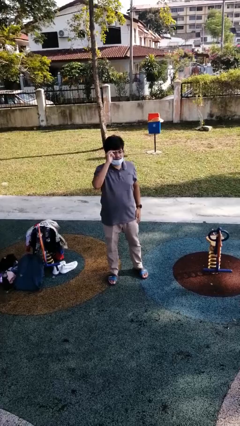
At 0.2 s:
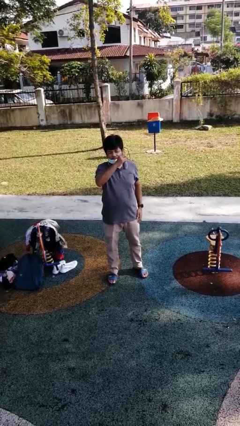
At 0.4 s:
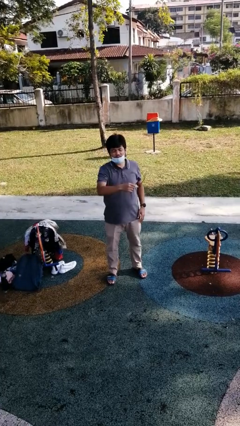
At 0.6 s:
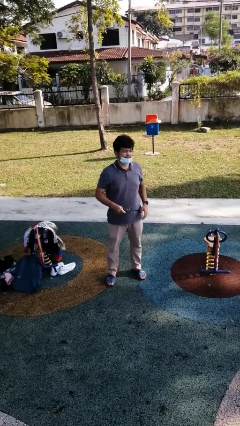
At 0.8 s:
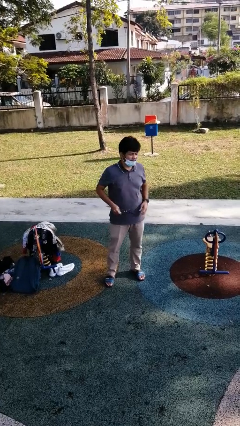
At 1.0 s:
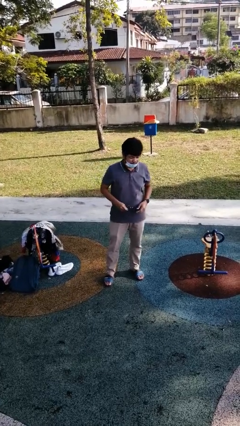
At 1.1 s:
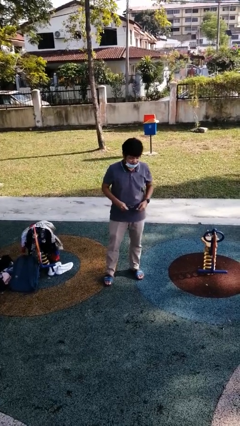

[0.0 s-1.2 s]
person takes off glasses

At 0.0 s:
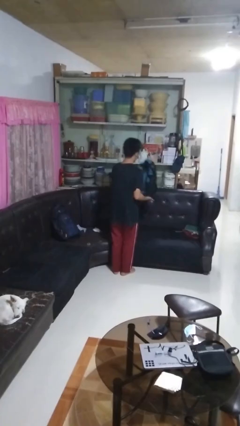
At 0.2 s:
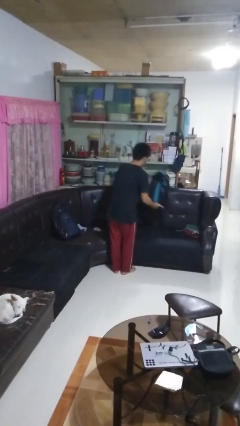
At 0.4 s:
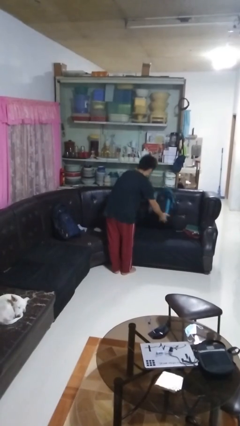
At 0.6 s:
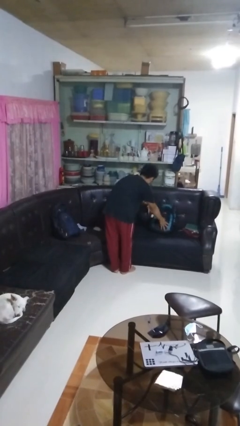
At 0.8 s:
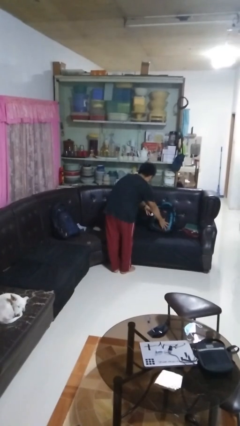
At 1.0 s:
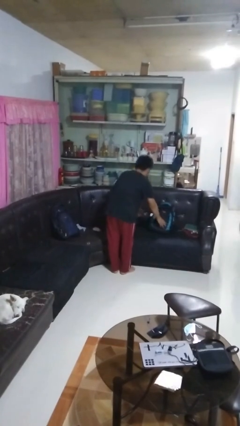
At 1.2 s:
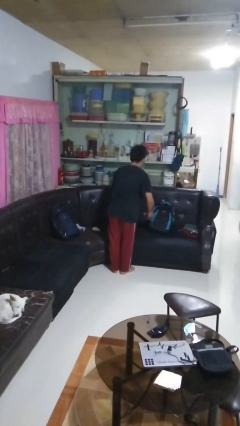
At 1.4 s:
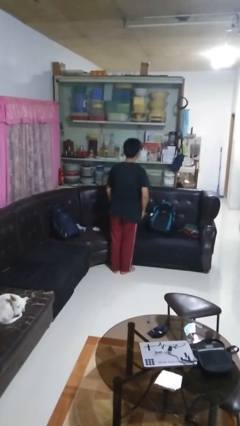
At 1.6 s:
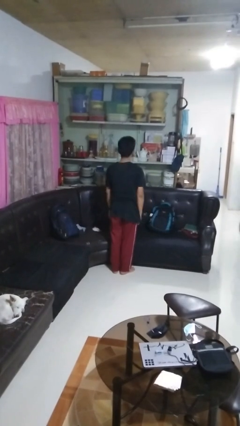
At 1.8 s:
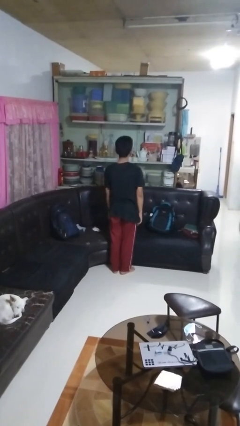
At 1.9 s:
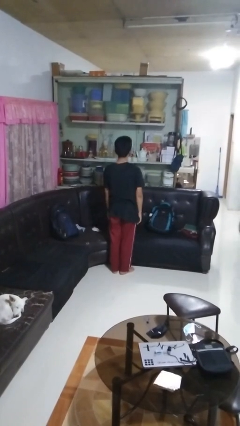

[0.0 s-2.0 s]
person puts down object on couch

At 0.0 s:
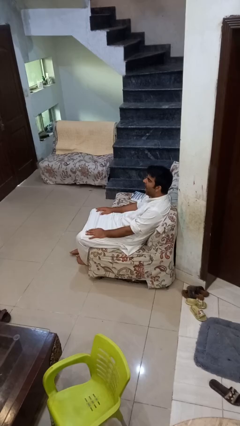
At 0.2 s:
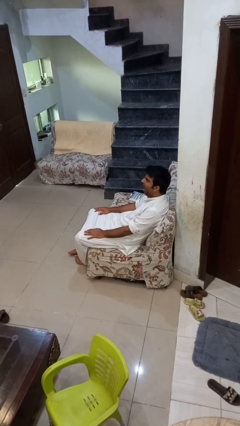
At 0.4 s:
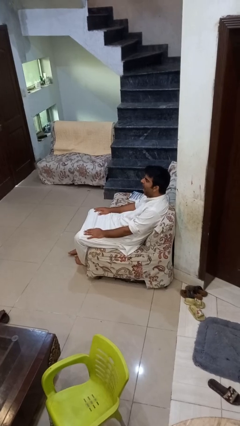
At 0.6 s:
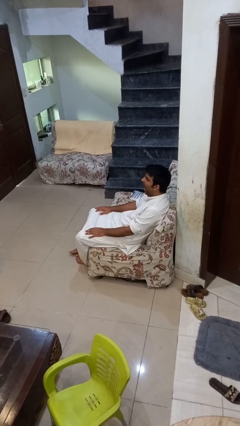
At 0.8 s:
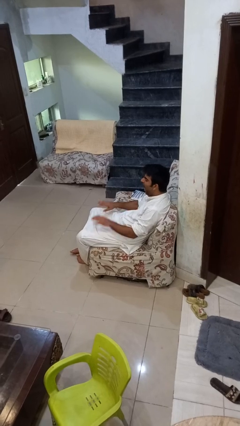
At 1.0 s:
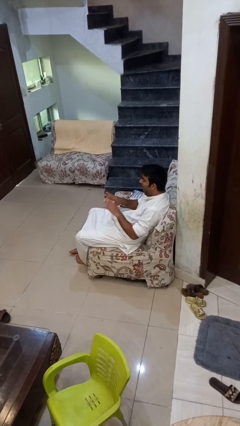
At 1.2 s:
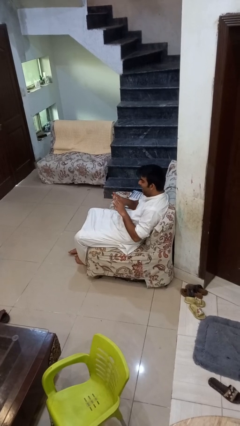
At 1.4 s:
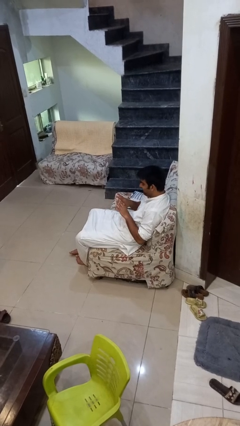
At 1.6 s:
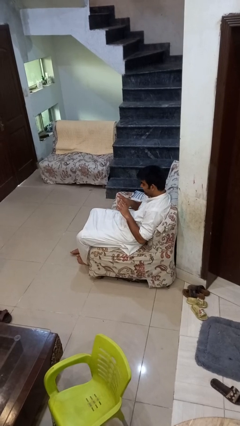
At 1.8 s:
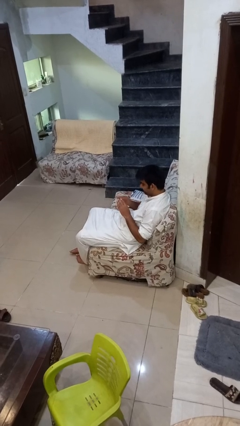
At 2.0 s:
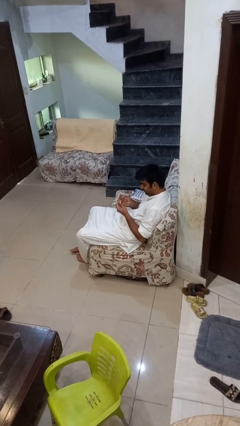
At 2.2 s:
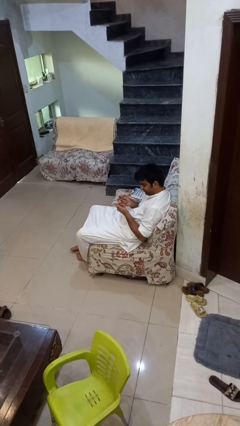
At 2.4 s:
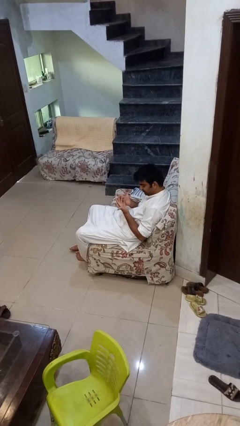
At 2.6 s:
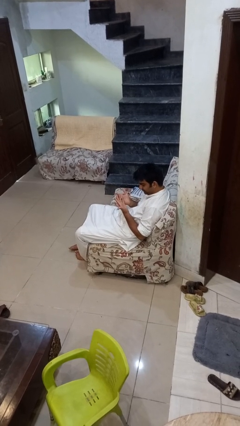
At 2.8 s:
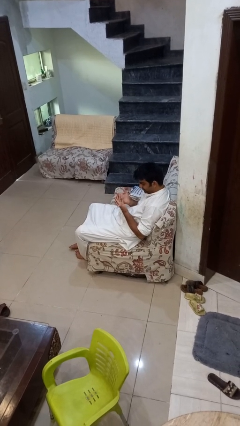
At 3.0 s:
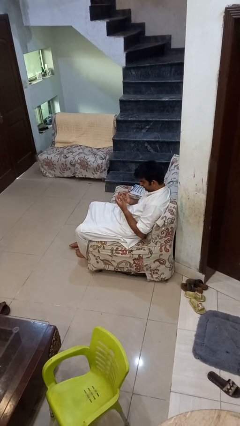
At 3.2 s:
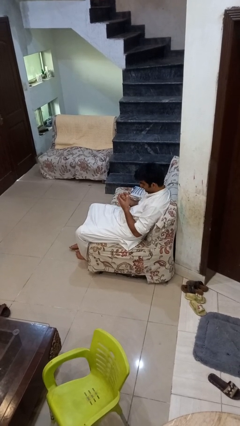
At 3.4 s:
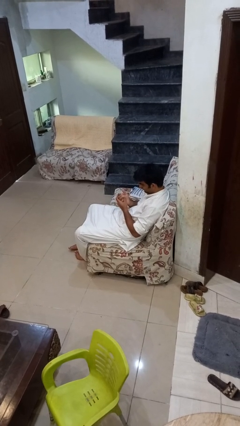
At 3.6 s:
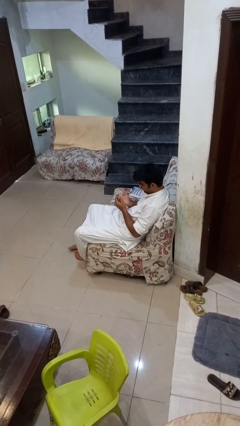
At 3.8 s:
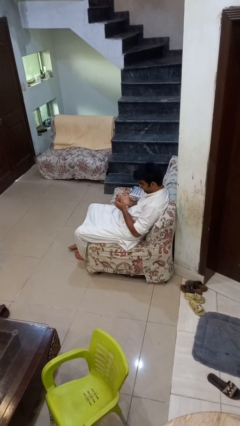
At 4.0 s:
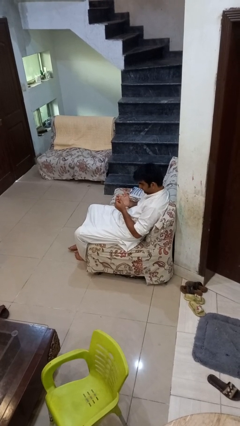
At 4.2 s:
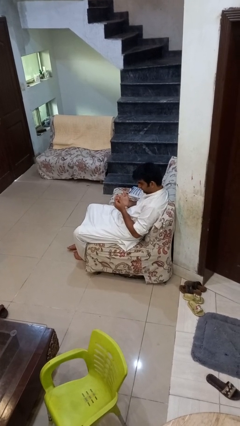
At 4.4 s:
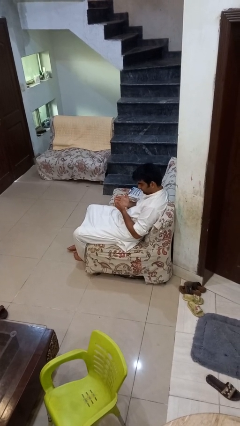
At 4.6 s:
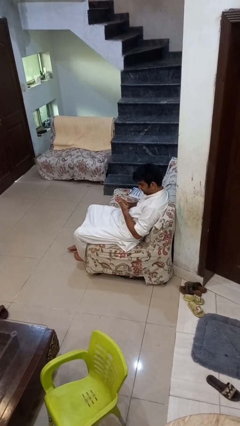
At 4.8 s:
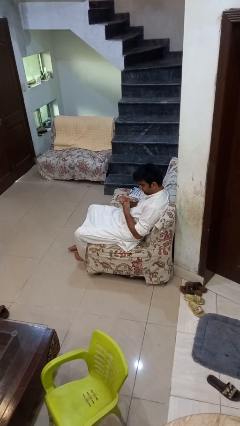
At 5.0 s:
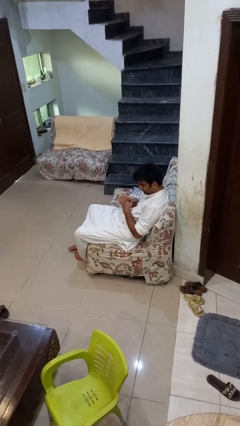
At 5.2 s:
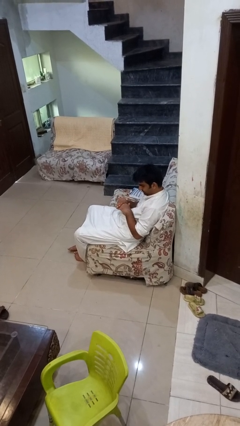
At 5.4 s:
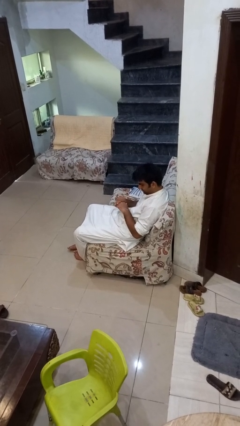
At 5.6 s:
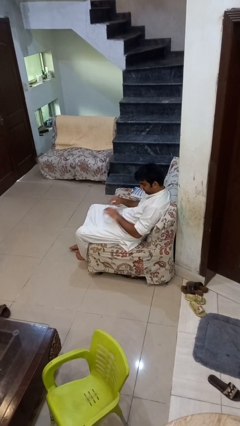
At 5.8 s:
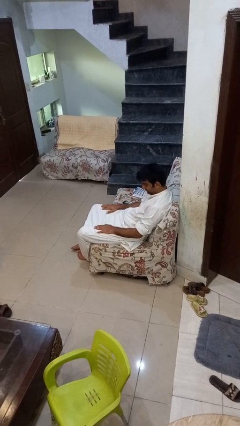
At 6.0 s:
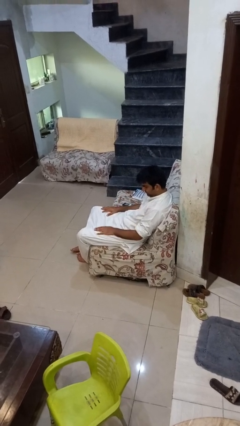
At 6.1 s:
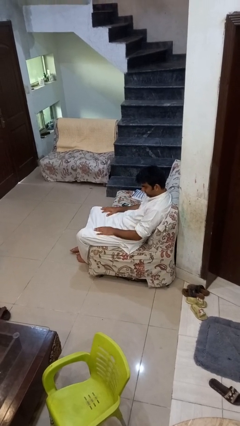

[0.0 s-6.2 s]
person looks at hands in lap

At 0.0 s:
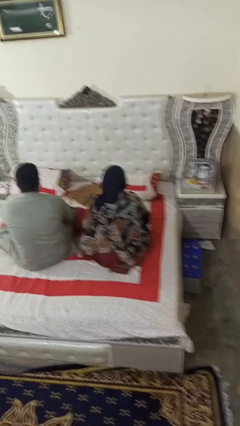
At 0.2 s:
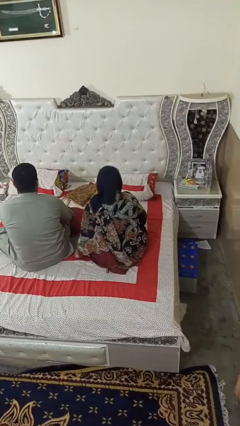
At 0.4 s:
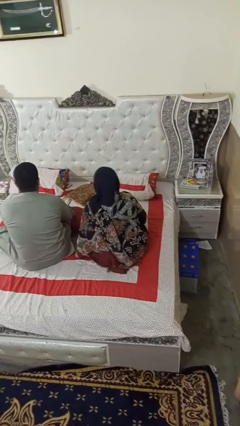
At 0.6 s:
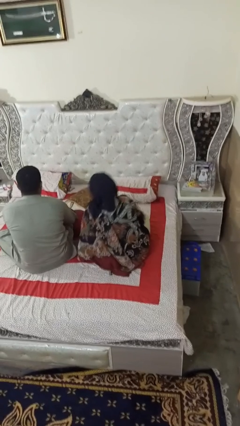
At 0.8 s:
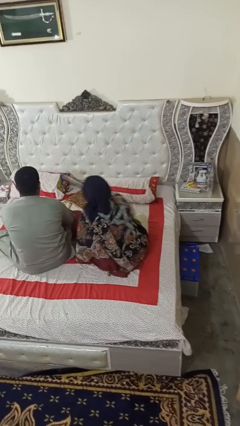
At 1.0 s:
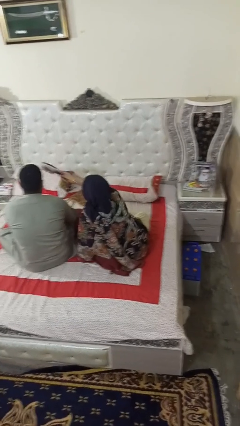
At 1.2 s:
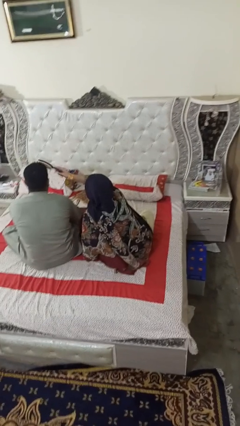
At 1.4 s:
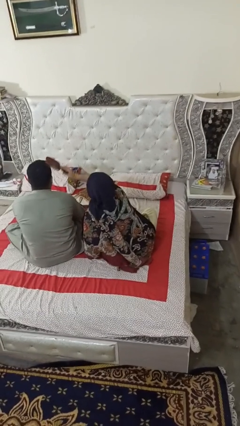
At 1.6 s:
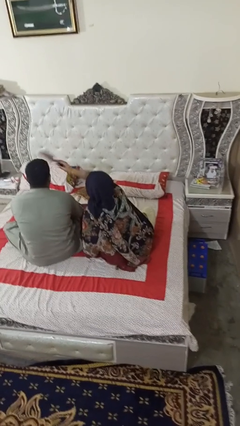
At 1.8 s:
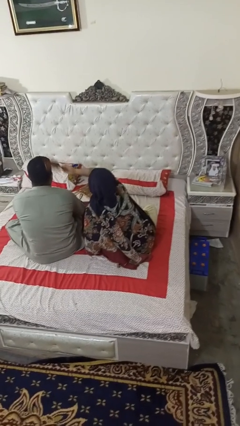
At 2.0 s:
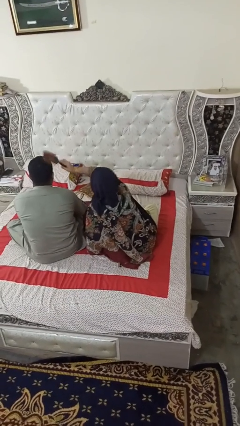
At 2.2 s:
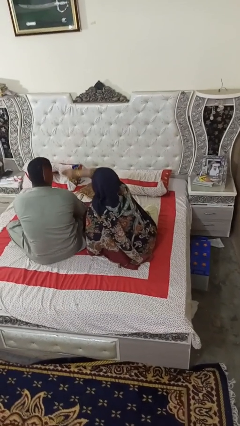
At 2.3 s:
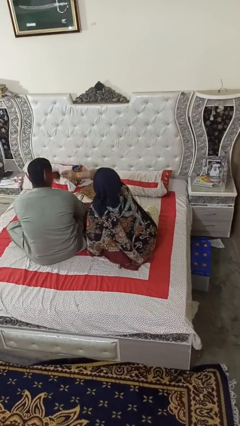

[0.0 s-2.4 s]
person brushes hair of person

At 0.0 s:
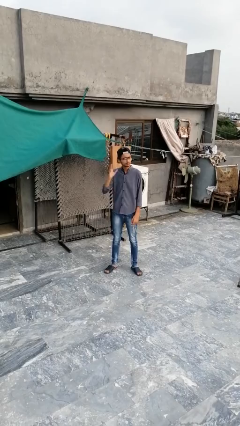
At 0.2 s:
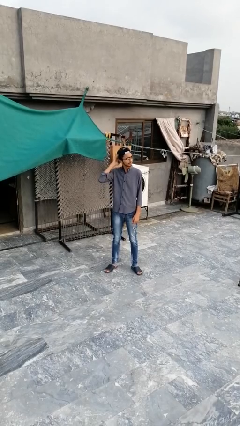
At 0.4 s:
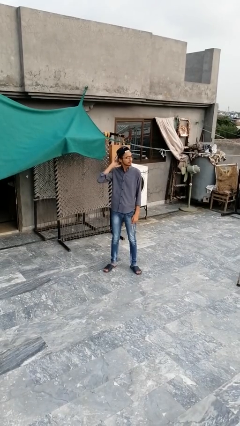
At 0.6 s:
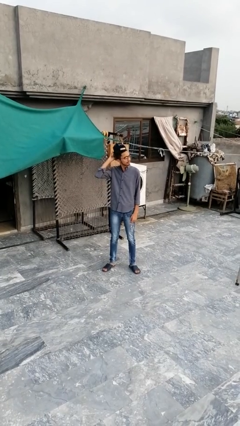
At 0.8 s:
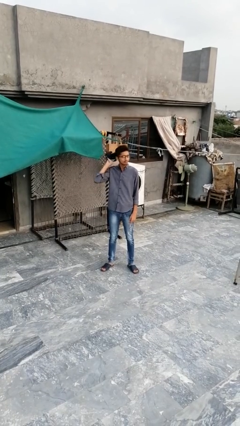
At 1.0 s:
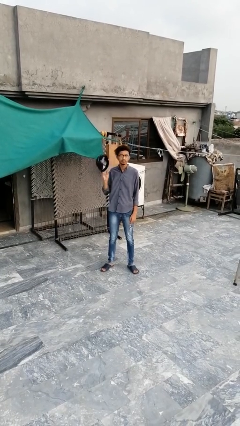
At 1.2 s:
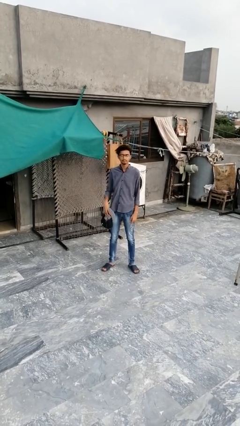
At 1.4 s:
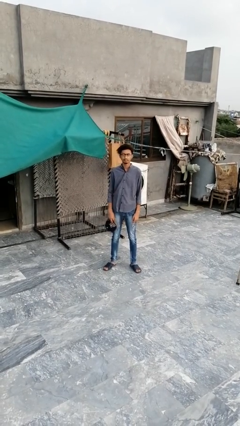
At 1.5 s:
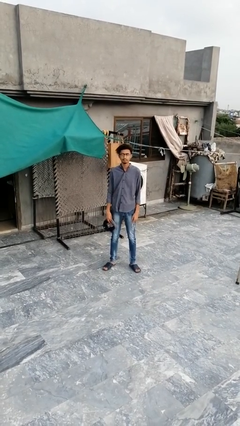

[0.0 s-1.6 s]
person takes off hat

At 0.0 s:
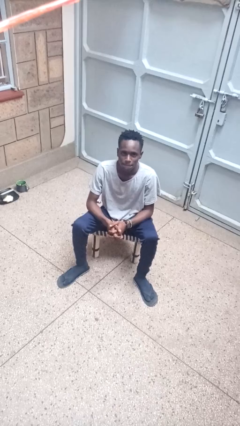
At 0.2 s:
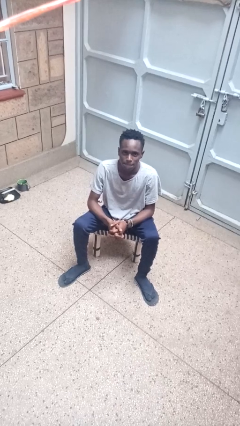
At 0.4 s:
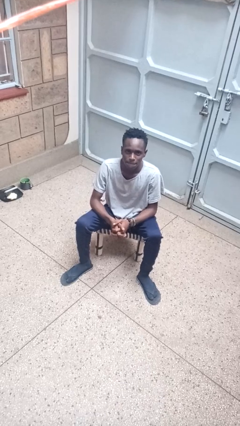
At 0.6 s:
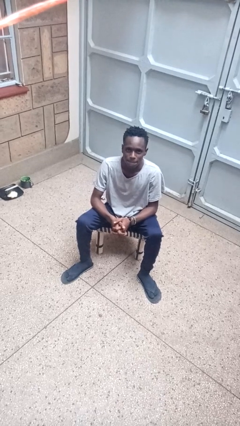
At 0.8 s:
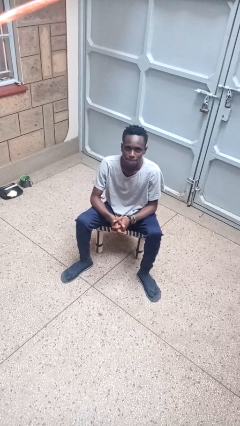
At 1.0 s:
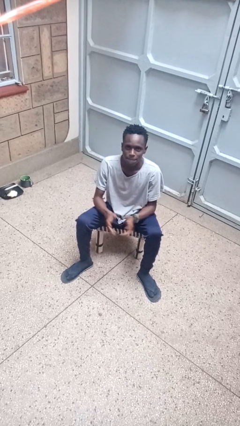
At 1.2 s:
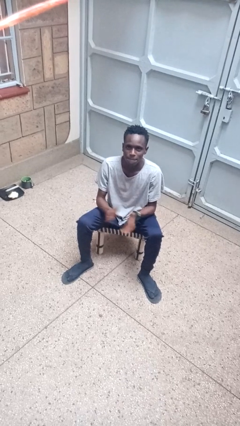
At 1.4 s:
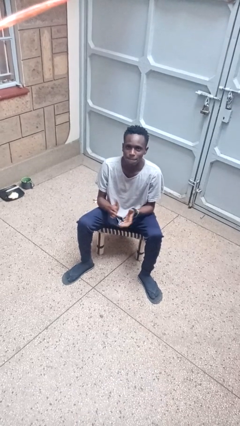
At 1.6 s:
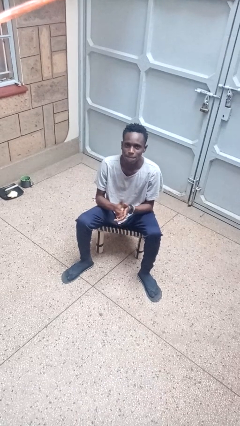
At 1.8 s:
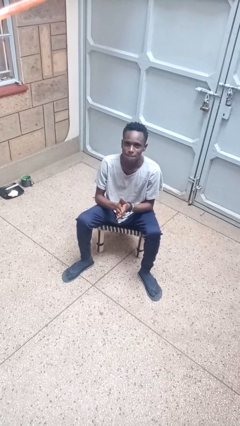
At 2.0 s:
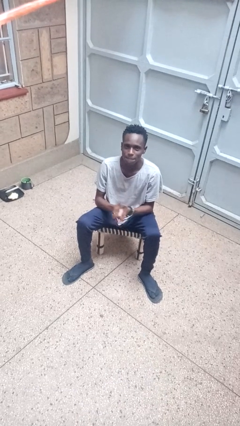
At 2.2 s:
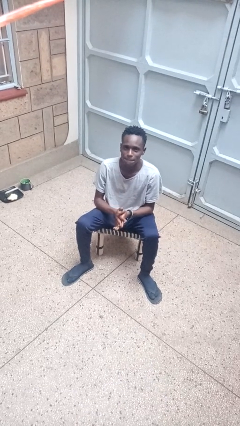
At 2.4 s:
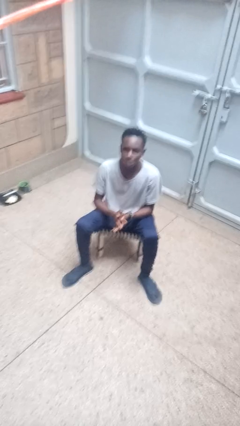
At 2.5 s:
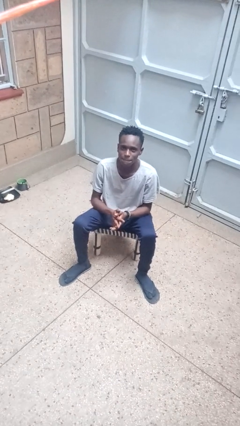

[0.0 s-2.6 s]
person claps hands

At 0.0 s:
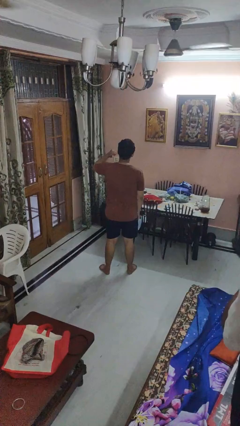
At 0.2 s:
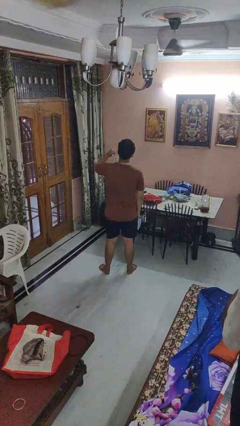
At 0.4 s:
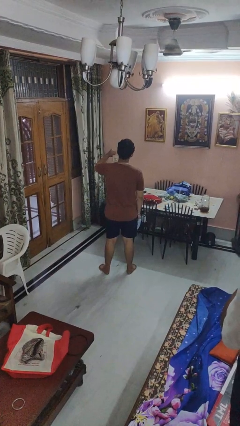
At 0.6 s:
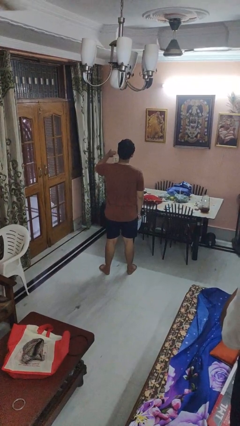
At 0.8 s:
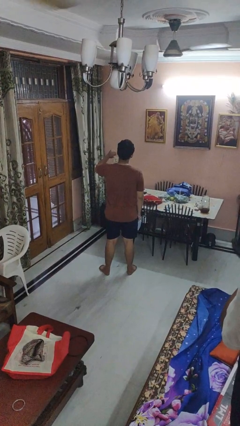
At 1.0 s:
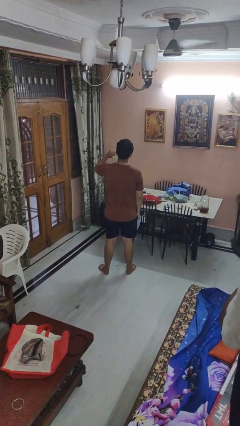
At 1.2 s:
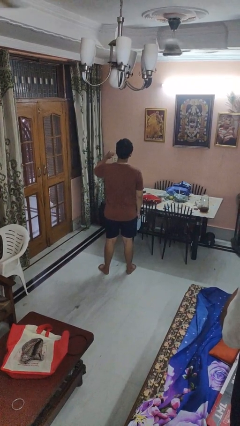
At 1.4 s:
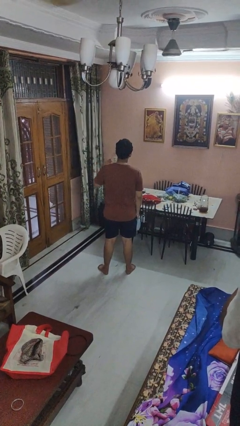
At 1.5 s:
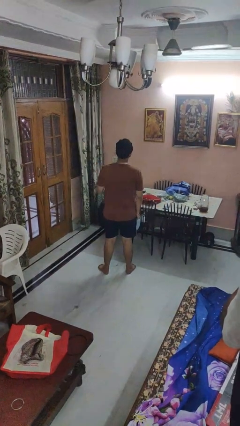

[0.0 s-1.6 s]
person gestures behind me
